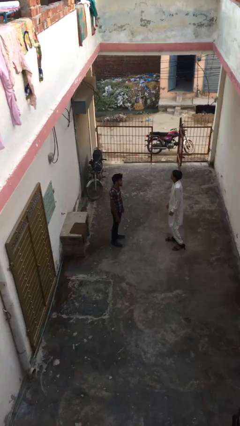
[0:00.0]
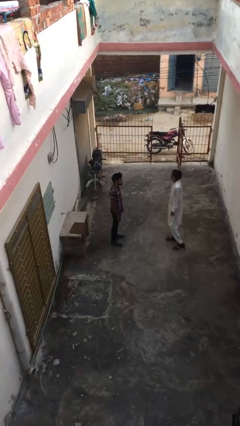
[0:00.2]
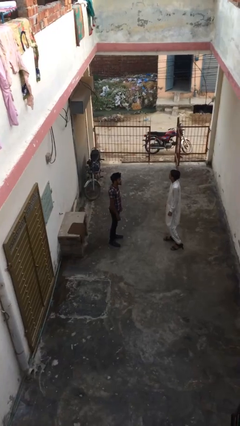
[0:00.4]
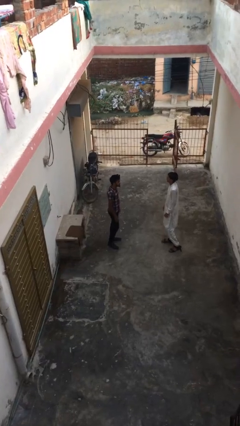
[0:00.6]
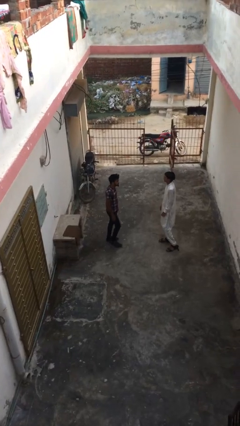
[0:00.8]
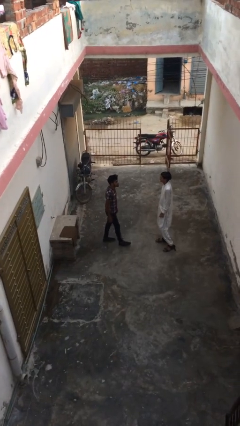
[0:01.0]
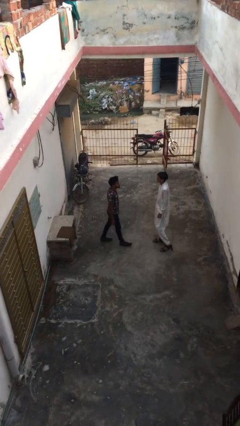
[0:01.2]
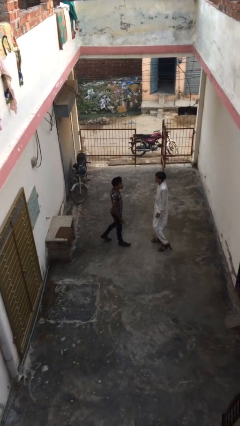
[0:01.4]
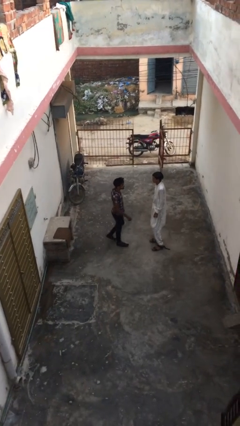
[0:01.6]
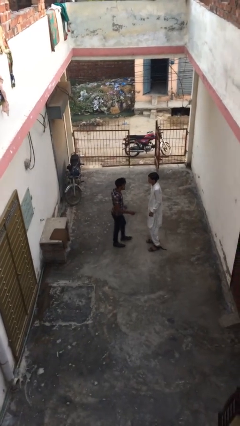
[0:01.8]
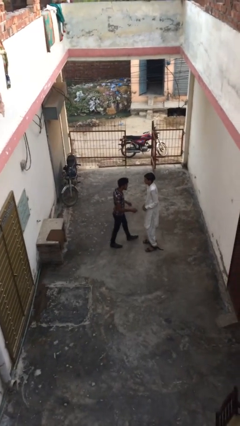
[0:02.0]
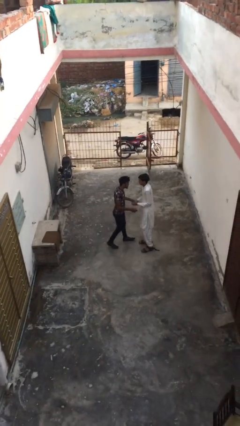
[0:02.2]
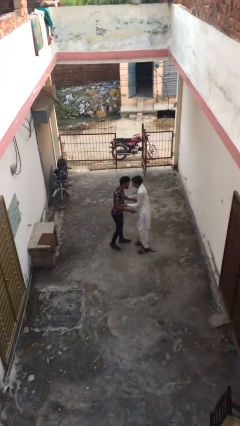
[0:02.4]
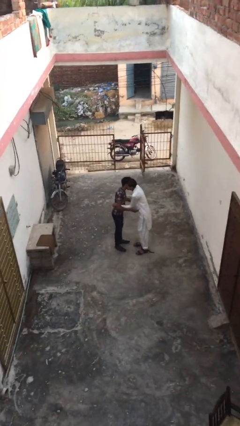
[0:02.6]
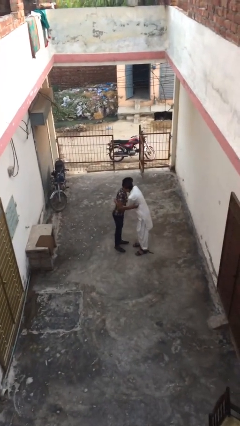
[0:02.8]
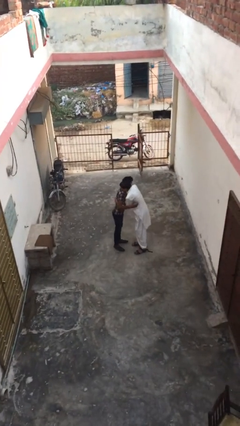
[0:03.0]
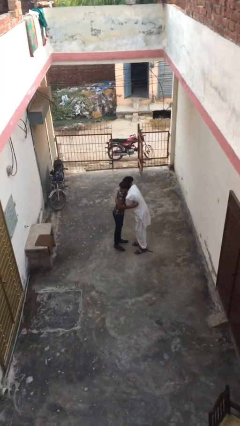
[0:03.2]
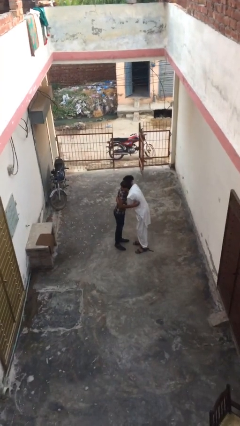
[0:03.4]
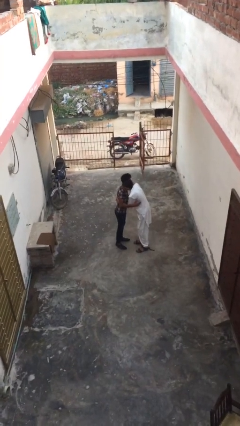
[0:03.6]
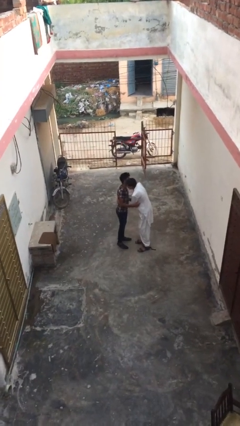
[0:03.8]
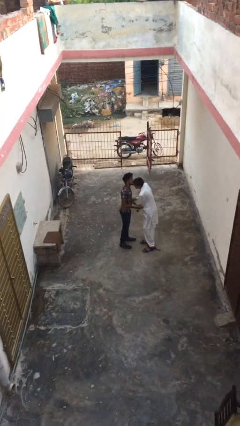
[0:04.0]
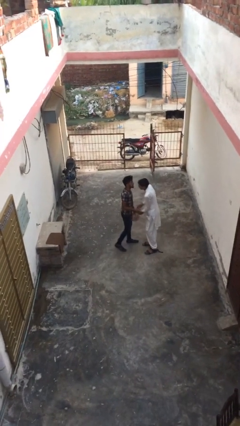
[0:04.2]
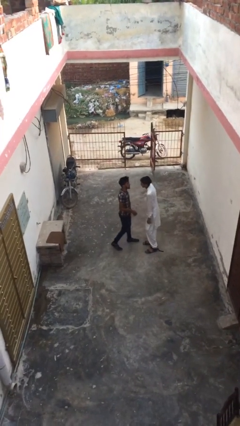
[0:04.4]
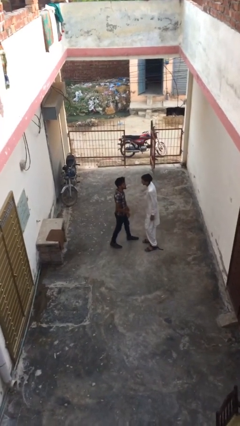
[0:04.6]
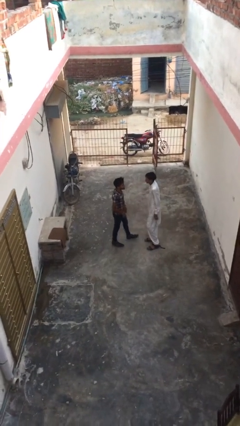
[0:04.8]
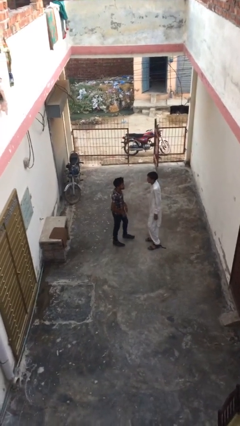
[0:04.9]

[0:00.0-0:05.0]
person embraces person

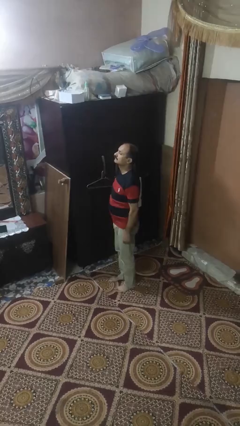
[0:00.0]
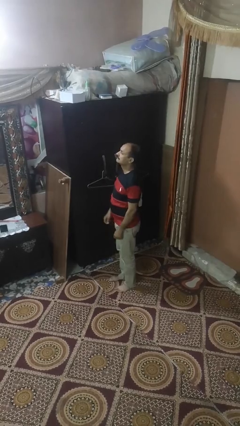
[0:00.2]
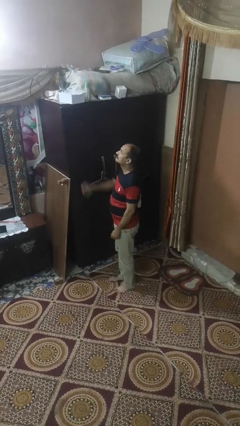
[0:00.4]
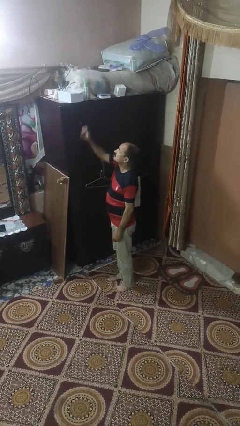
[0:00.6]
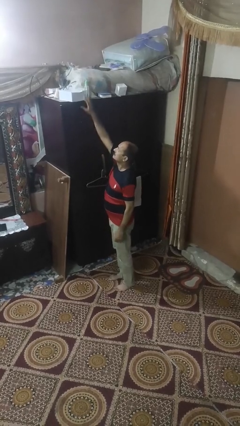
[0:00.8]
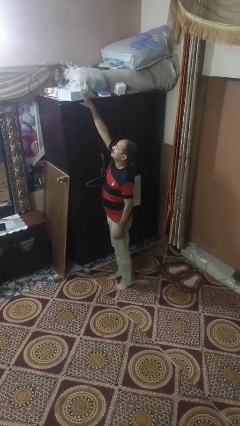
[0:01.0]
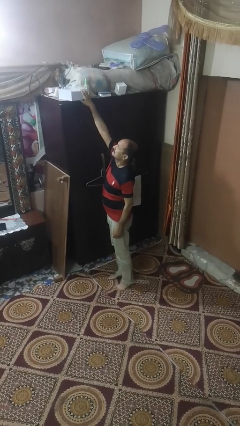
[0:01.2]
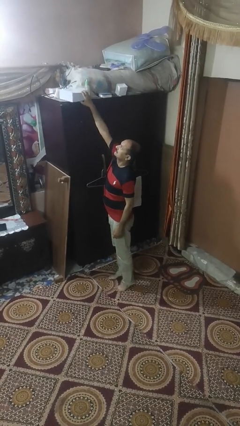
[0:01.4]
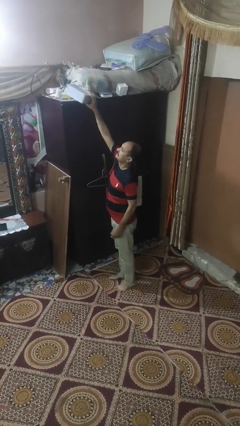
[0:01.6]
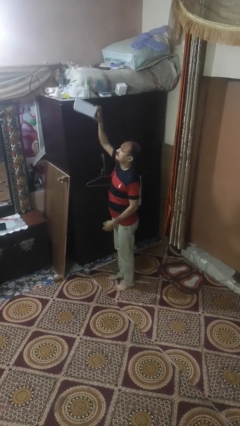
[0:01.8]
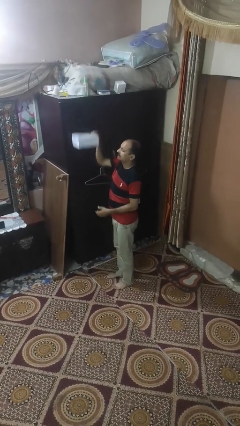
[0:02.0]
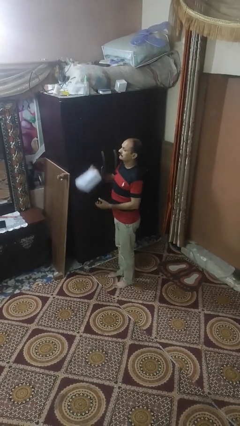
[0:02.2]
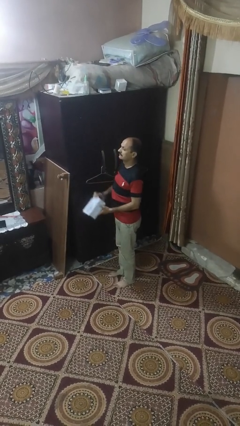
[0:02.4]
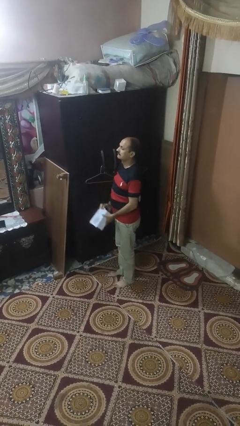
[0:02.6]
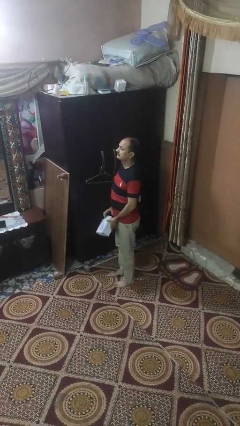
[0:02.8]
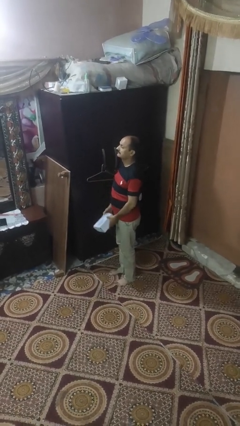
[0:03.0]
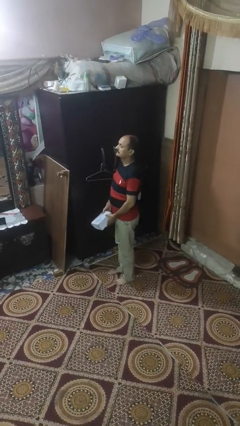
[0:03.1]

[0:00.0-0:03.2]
person puts down object on shelf

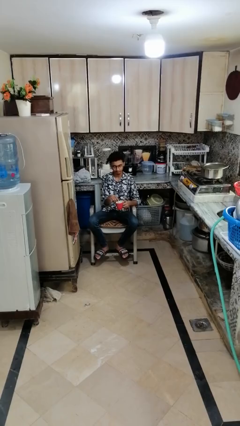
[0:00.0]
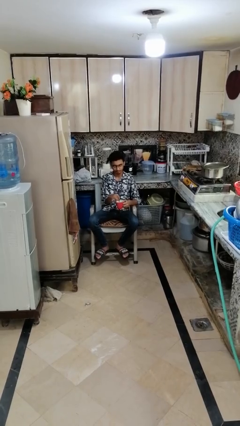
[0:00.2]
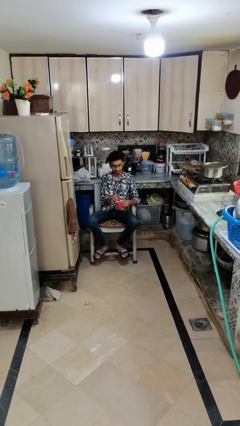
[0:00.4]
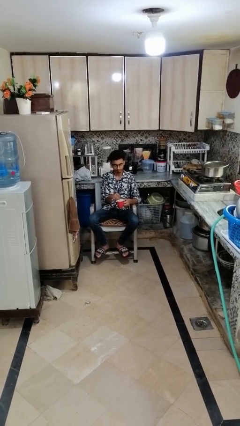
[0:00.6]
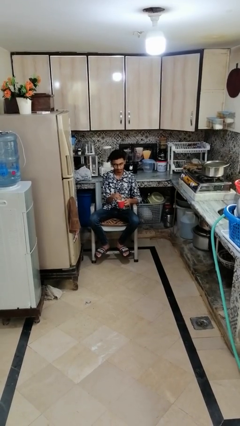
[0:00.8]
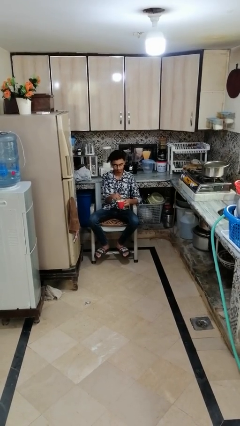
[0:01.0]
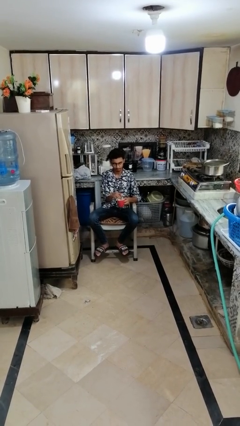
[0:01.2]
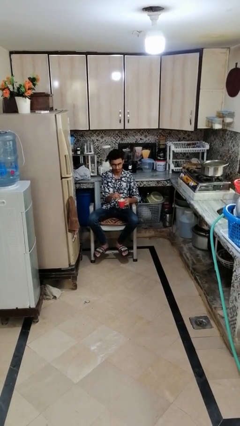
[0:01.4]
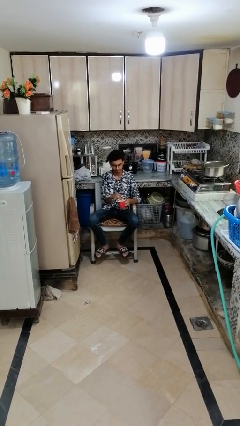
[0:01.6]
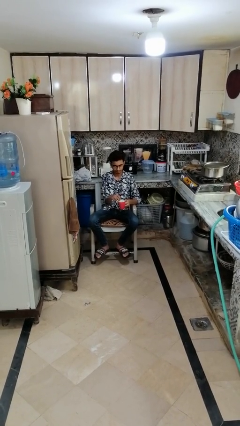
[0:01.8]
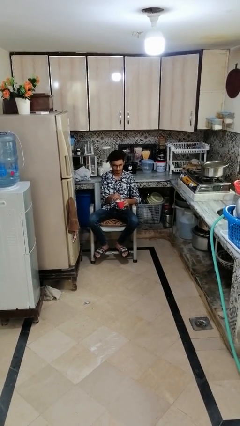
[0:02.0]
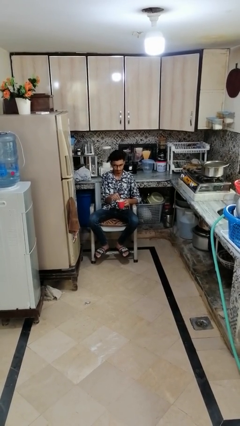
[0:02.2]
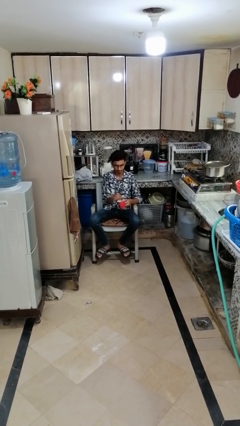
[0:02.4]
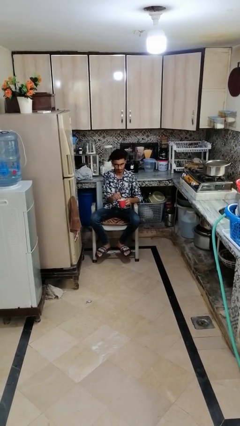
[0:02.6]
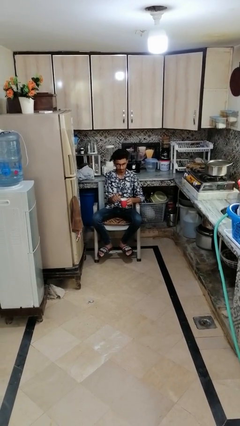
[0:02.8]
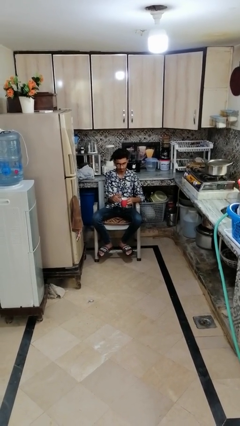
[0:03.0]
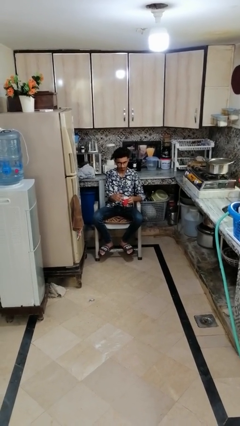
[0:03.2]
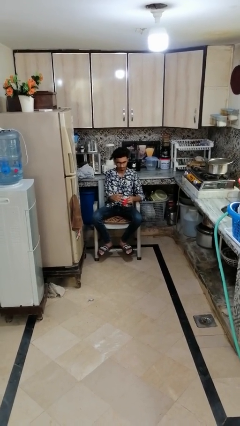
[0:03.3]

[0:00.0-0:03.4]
person stirs mug

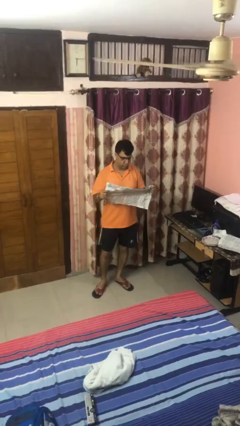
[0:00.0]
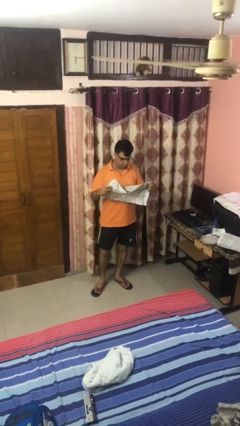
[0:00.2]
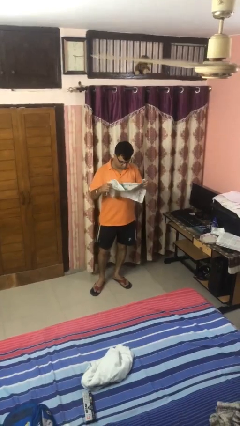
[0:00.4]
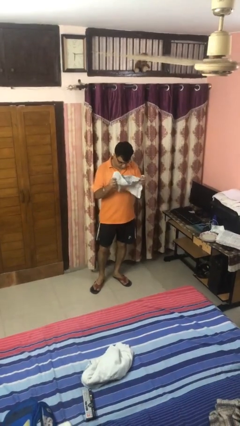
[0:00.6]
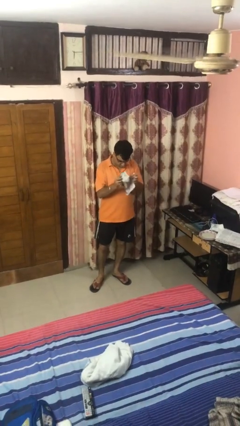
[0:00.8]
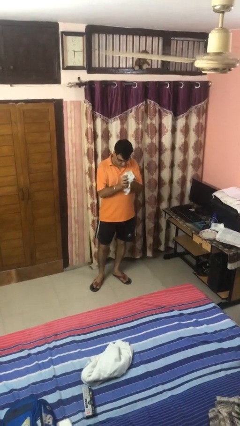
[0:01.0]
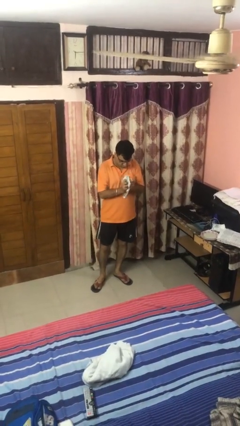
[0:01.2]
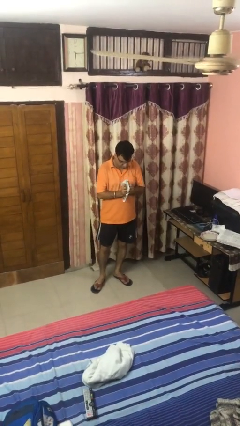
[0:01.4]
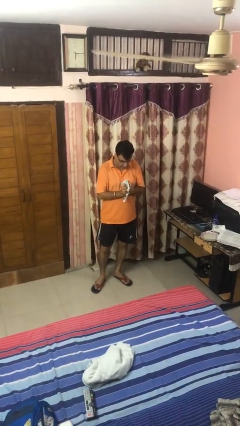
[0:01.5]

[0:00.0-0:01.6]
person crumples paper

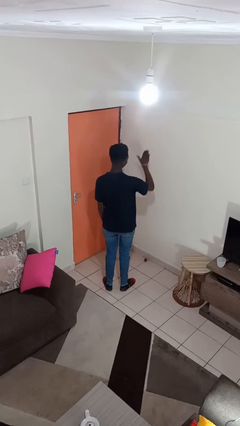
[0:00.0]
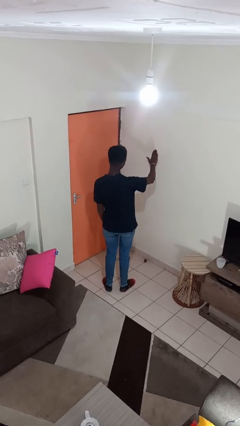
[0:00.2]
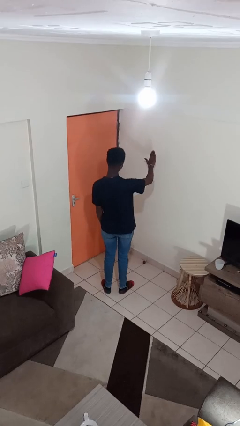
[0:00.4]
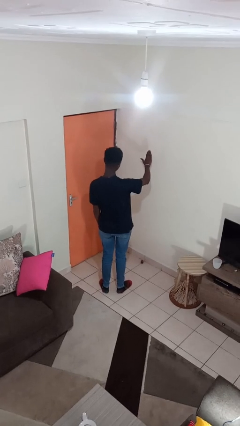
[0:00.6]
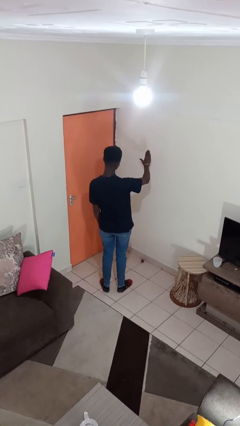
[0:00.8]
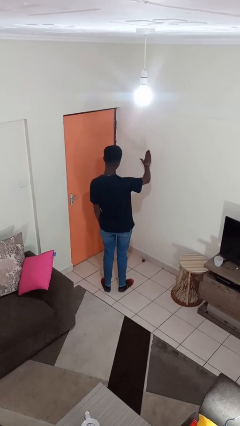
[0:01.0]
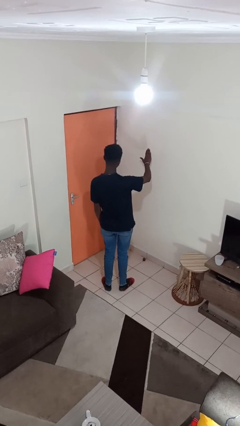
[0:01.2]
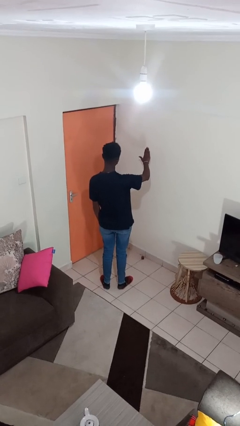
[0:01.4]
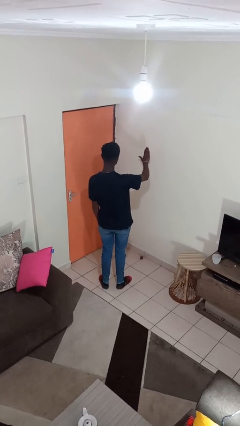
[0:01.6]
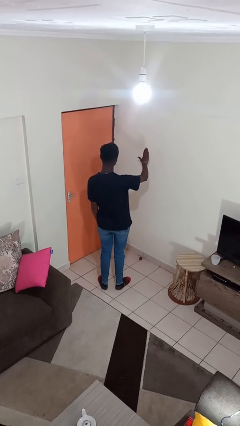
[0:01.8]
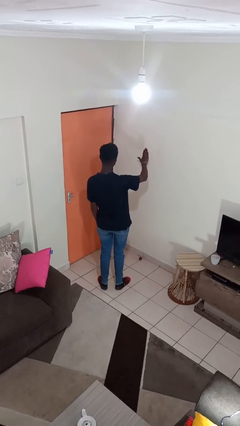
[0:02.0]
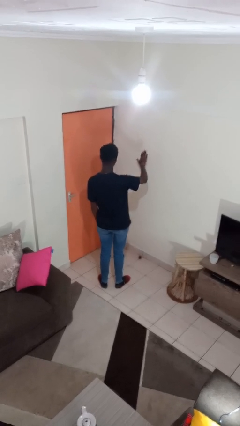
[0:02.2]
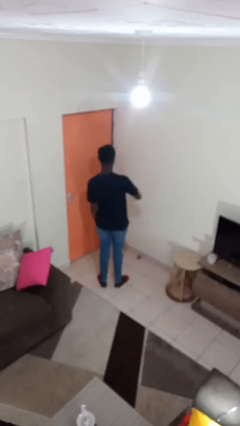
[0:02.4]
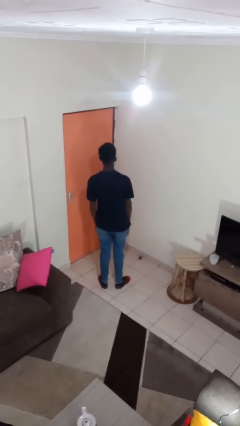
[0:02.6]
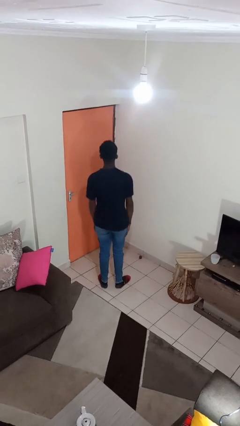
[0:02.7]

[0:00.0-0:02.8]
person gestures stop

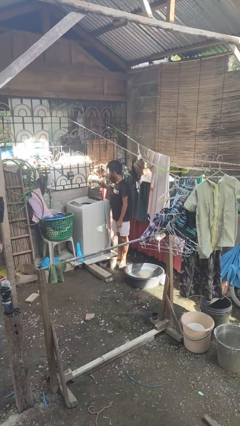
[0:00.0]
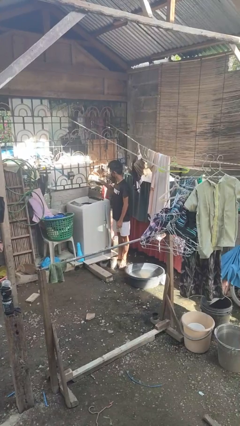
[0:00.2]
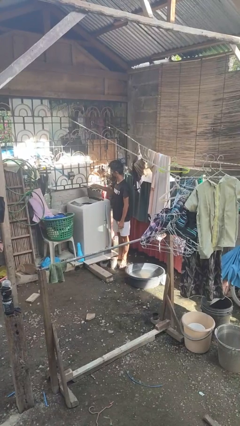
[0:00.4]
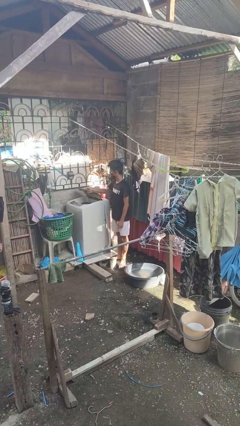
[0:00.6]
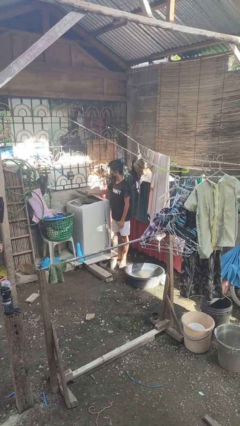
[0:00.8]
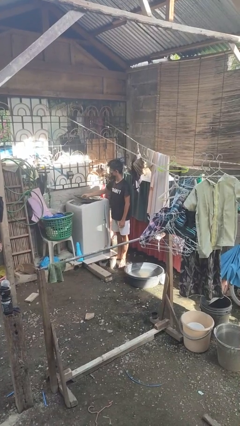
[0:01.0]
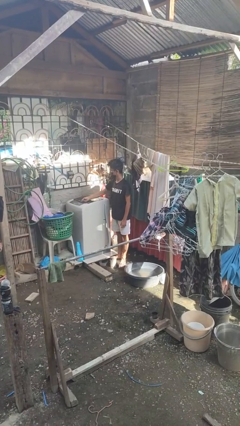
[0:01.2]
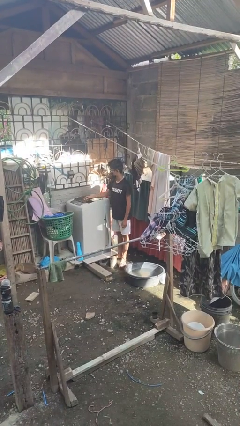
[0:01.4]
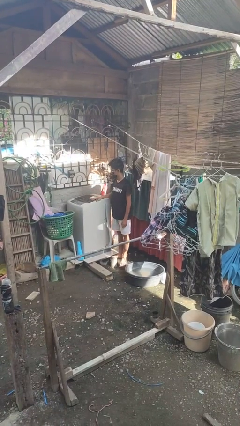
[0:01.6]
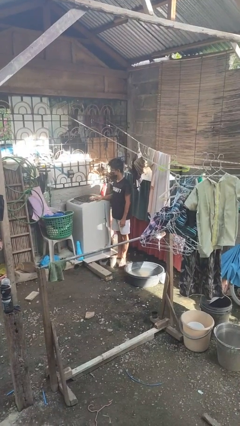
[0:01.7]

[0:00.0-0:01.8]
person closes clothes washer
